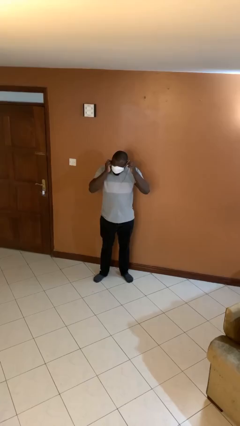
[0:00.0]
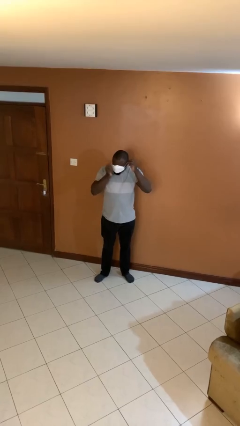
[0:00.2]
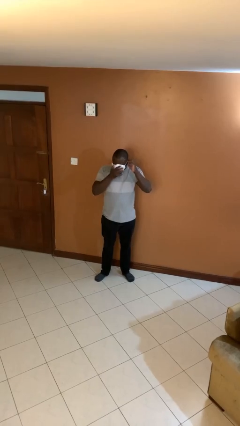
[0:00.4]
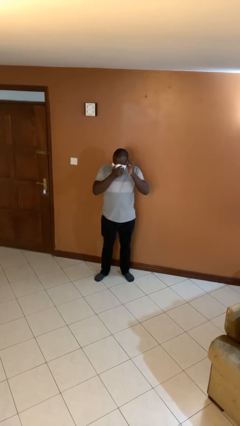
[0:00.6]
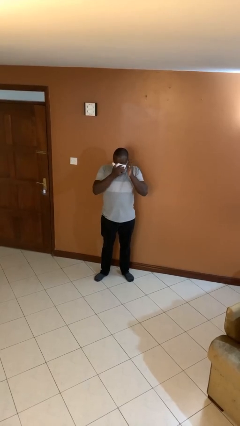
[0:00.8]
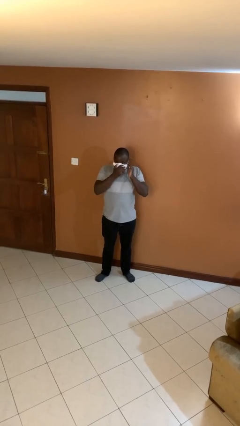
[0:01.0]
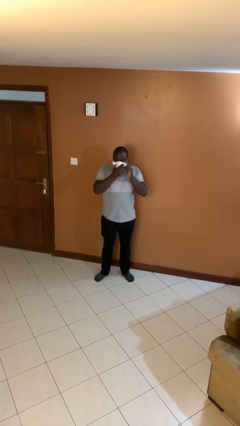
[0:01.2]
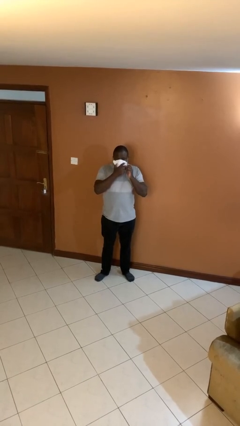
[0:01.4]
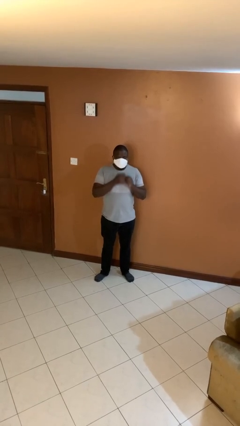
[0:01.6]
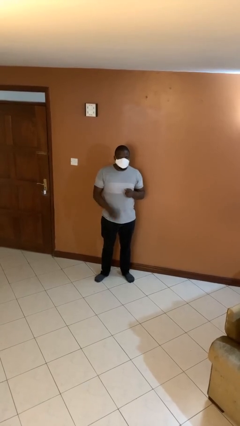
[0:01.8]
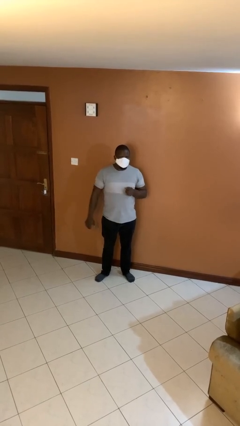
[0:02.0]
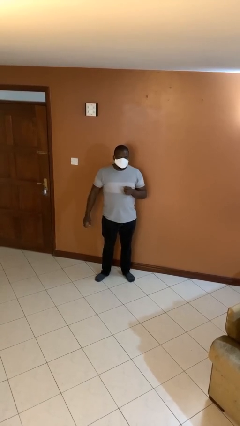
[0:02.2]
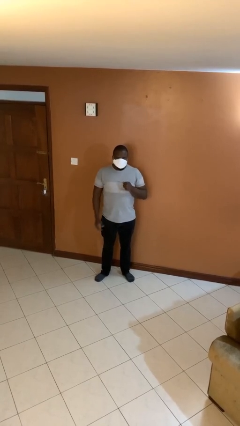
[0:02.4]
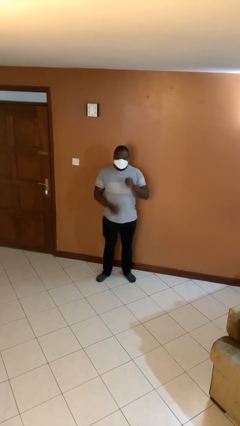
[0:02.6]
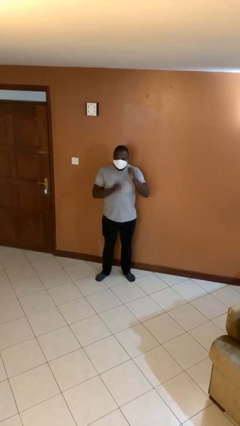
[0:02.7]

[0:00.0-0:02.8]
person puts on facemask

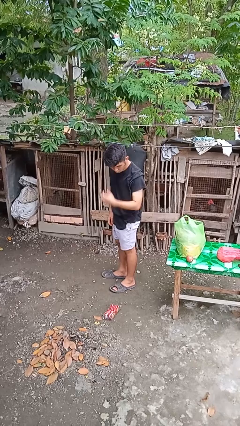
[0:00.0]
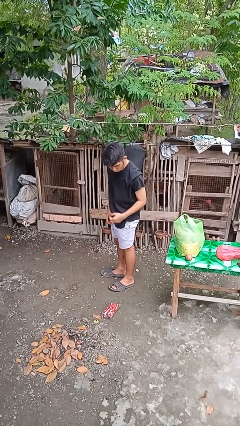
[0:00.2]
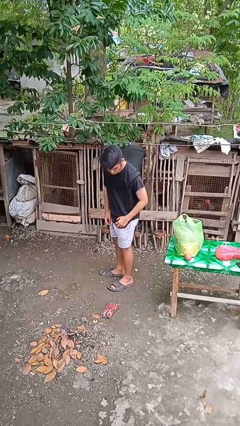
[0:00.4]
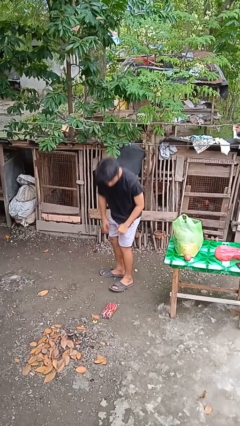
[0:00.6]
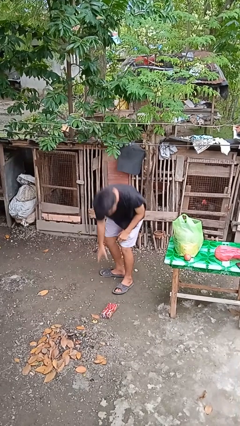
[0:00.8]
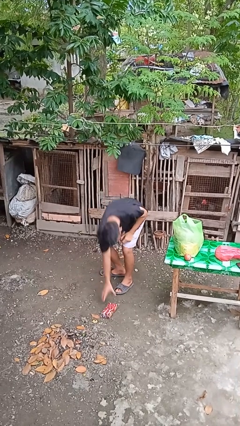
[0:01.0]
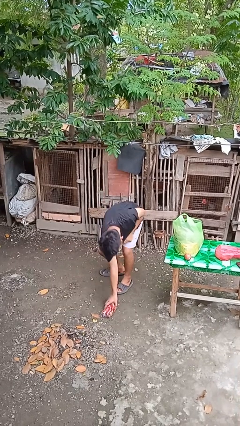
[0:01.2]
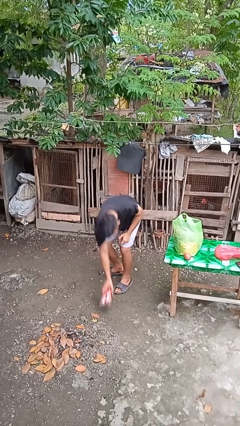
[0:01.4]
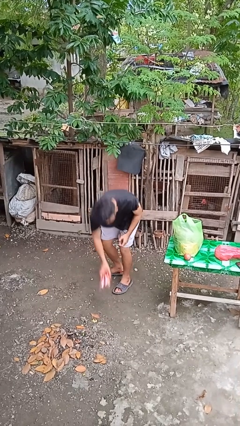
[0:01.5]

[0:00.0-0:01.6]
person picks up object from floor

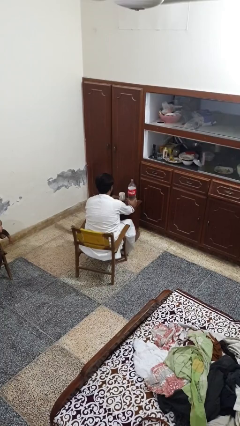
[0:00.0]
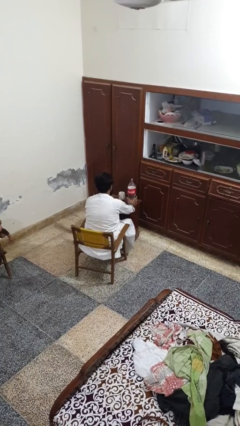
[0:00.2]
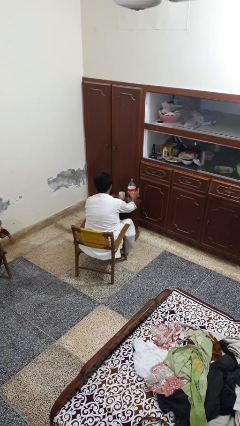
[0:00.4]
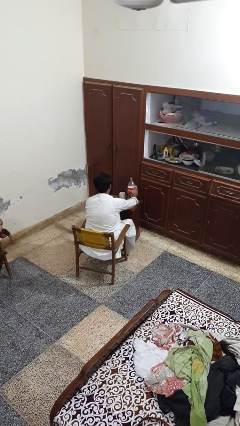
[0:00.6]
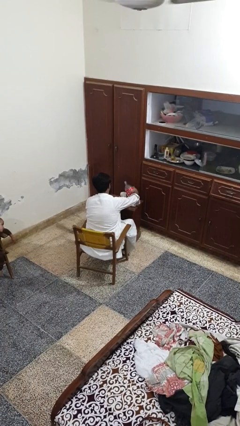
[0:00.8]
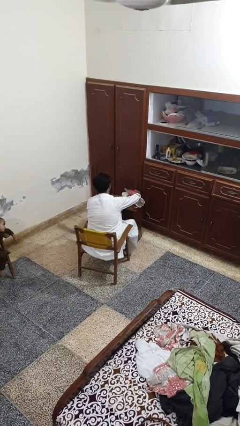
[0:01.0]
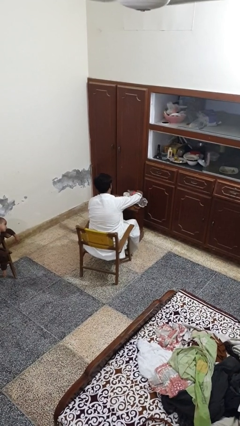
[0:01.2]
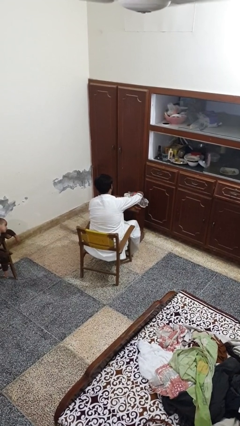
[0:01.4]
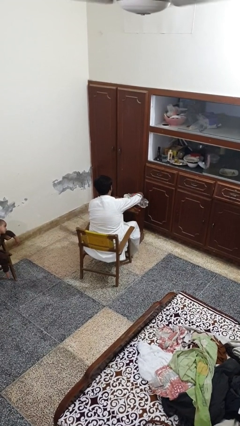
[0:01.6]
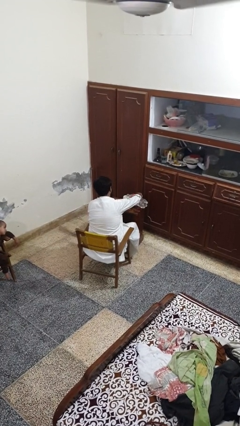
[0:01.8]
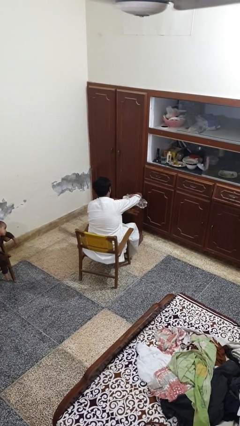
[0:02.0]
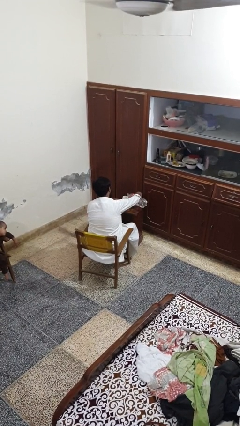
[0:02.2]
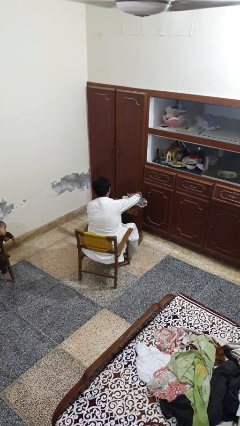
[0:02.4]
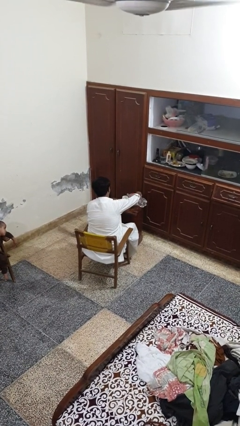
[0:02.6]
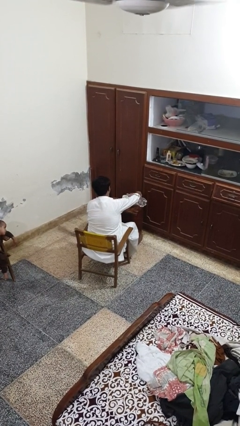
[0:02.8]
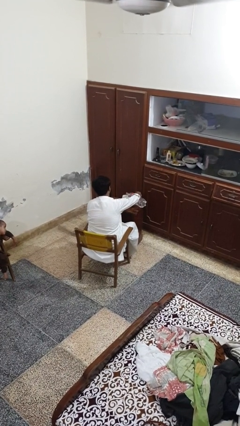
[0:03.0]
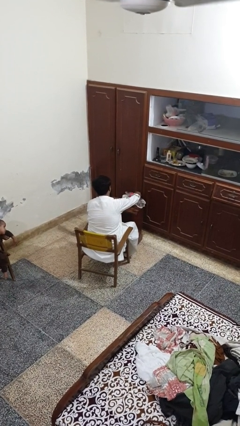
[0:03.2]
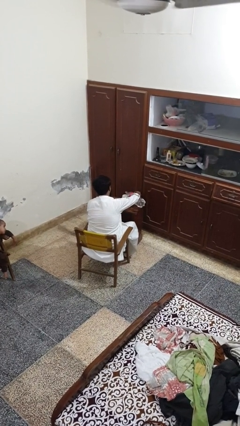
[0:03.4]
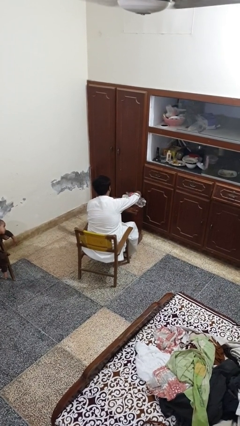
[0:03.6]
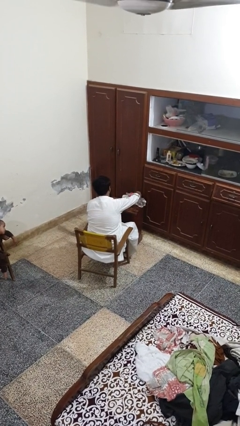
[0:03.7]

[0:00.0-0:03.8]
person pours liquid into cup

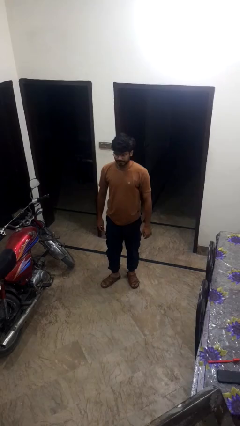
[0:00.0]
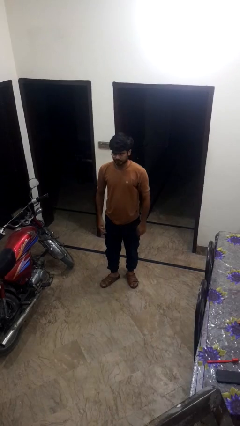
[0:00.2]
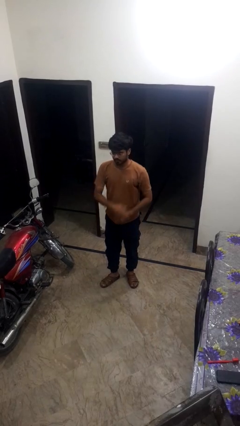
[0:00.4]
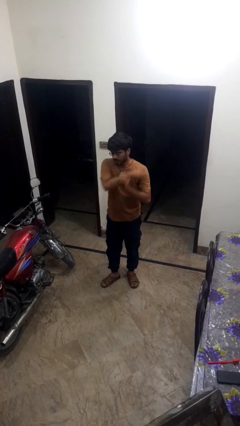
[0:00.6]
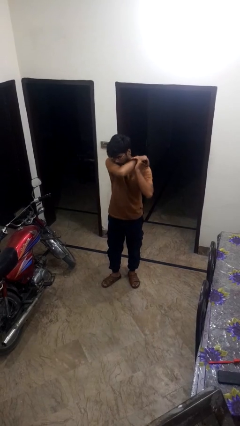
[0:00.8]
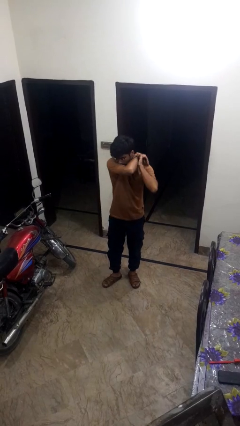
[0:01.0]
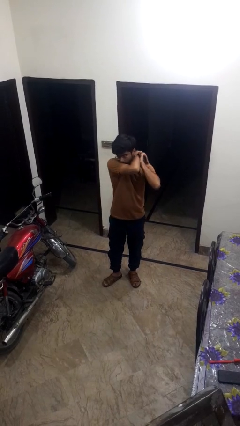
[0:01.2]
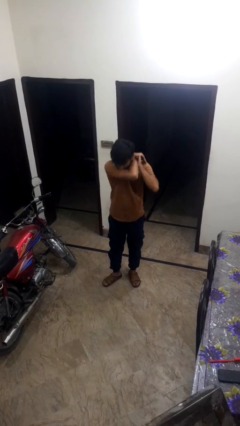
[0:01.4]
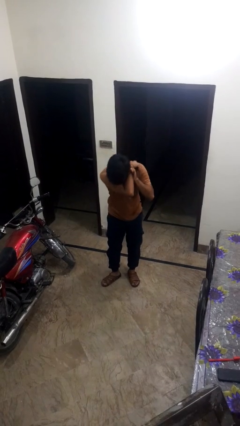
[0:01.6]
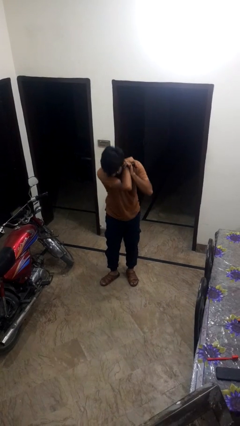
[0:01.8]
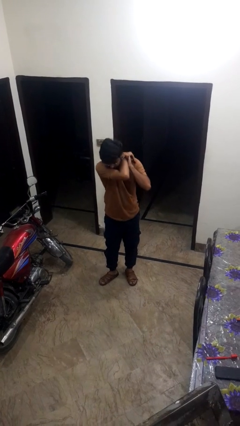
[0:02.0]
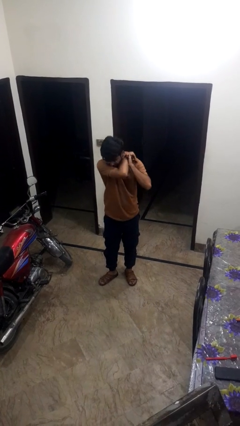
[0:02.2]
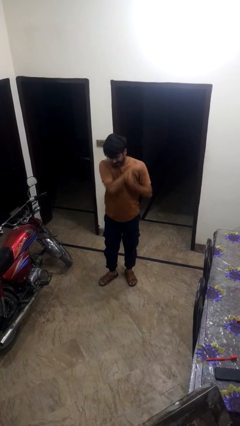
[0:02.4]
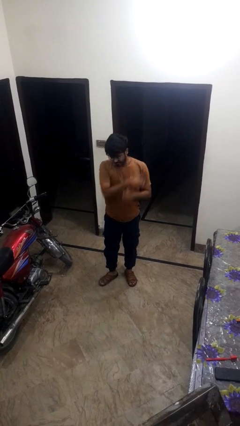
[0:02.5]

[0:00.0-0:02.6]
person sneezes into arm

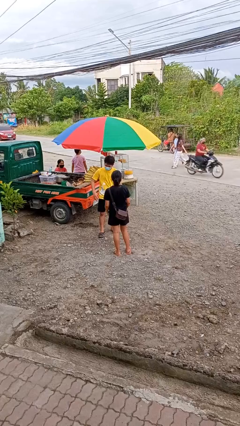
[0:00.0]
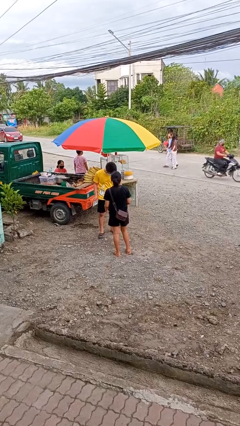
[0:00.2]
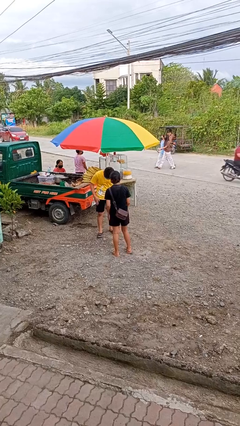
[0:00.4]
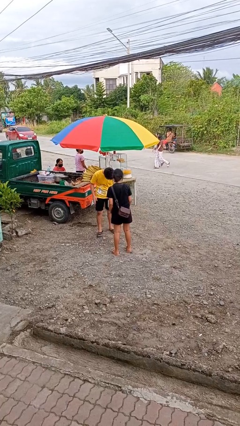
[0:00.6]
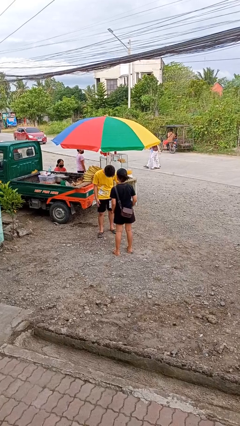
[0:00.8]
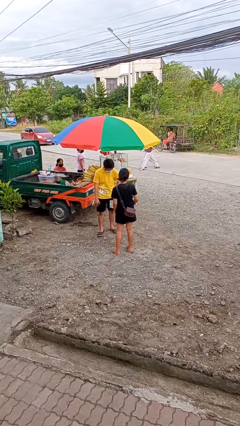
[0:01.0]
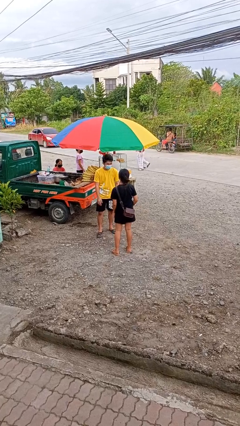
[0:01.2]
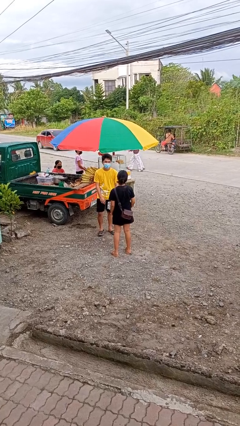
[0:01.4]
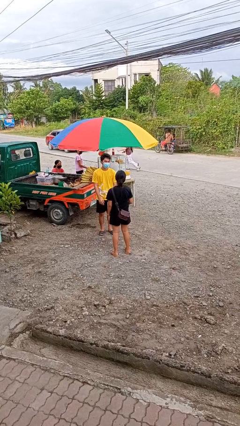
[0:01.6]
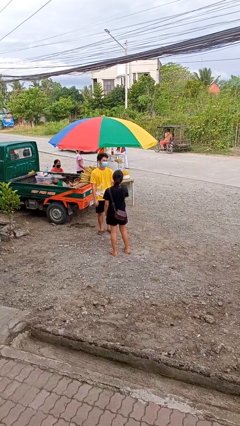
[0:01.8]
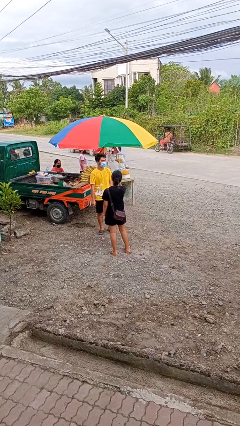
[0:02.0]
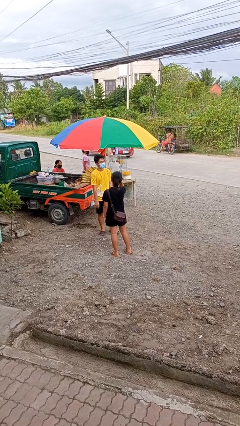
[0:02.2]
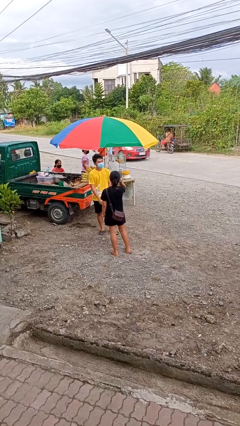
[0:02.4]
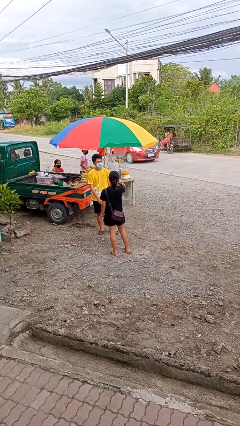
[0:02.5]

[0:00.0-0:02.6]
person laughs with person

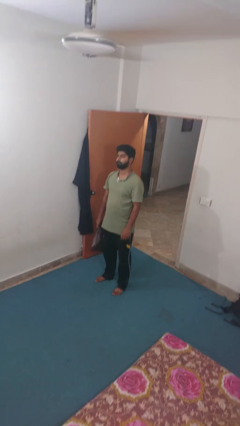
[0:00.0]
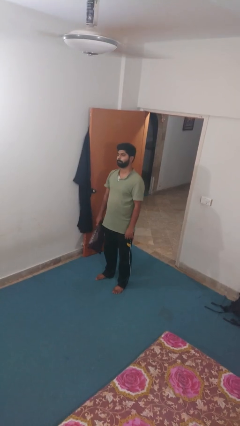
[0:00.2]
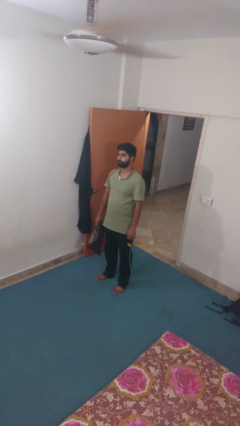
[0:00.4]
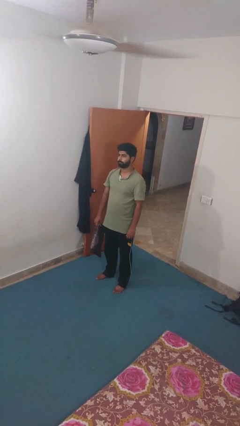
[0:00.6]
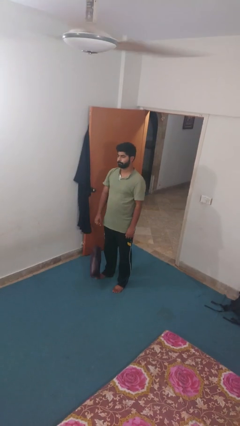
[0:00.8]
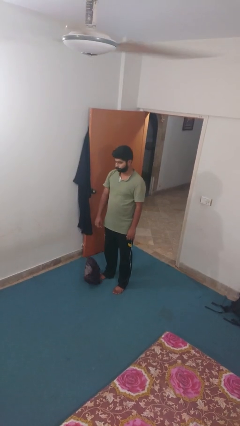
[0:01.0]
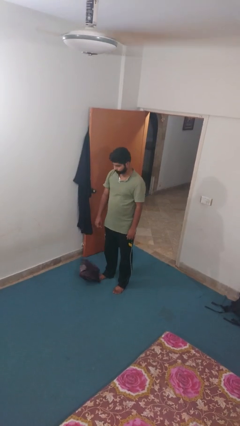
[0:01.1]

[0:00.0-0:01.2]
person drops object

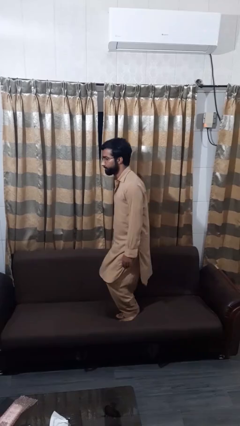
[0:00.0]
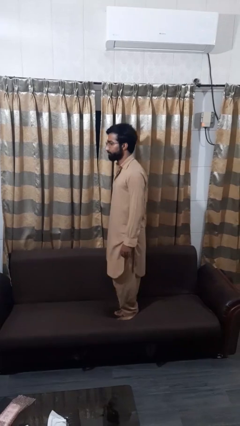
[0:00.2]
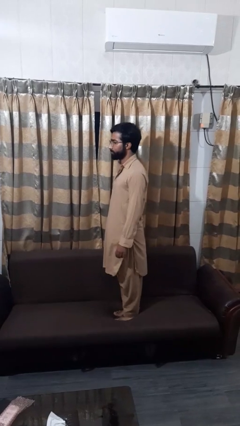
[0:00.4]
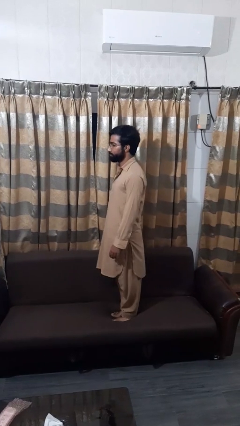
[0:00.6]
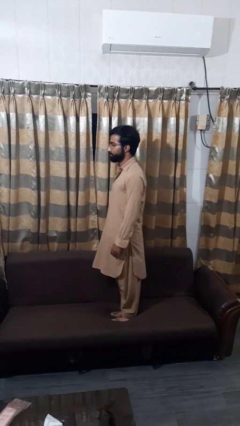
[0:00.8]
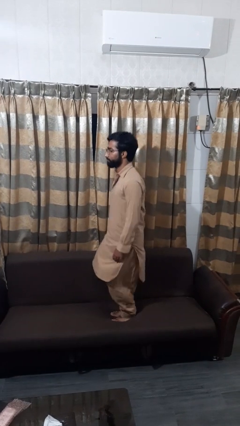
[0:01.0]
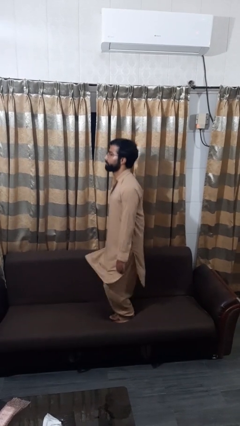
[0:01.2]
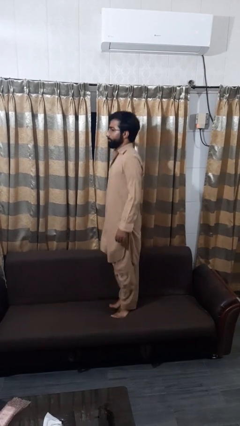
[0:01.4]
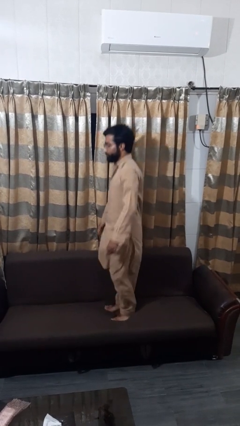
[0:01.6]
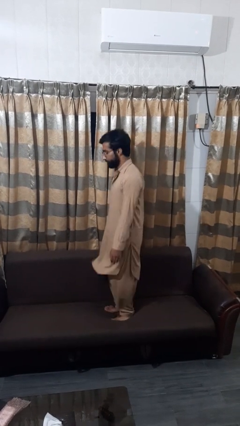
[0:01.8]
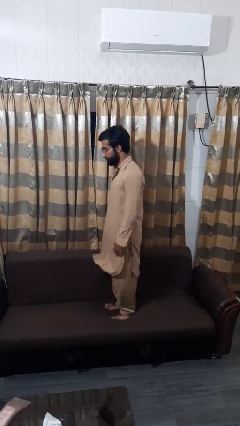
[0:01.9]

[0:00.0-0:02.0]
person jumps on couch

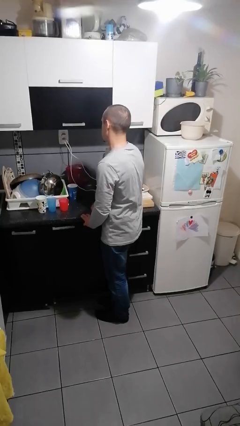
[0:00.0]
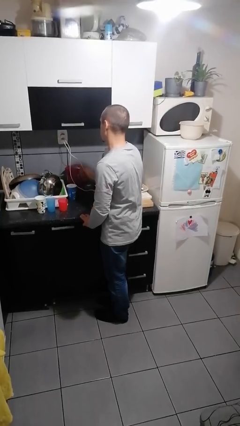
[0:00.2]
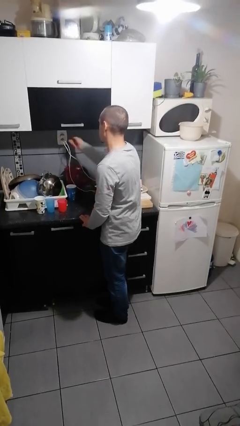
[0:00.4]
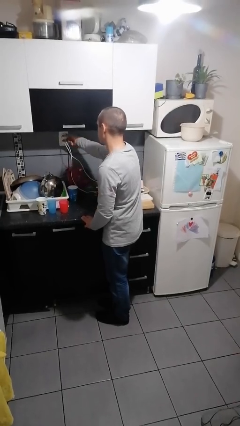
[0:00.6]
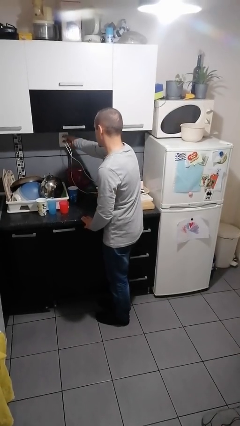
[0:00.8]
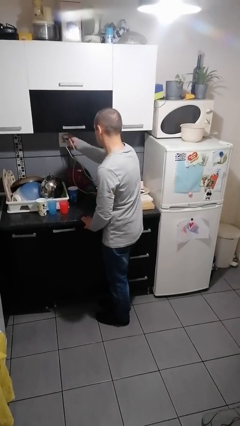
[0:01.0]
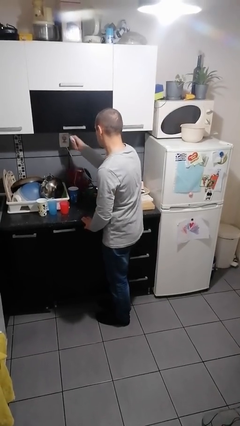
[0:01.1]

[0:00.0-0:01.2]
person unplugs from electrical socket
